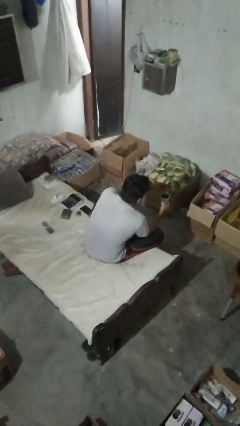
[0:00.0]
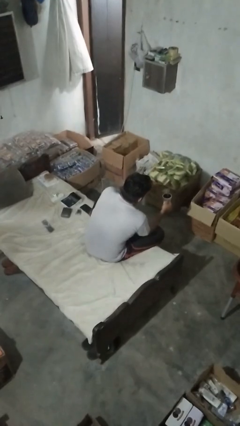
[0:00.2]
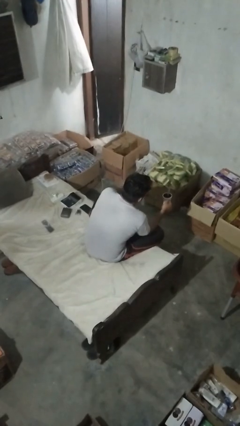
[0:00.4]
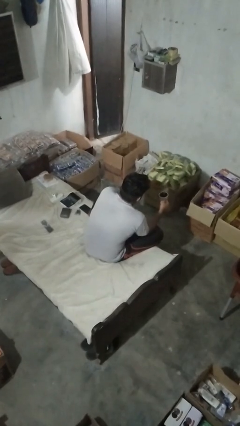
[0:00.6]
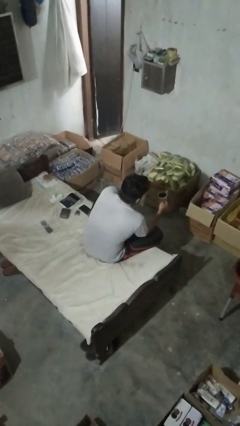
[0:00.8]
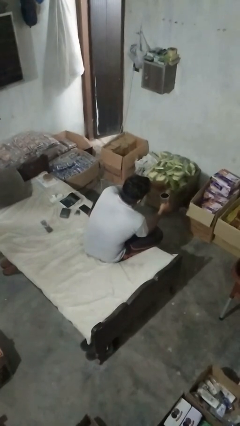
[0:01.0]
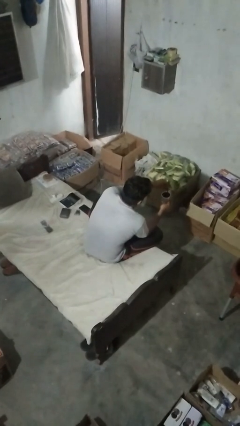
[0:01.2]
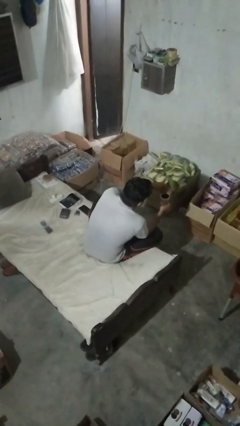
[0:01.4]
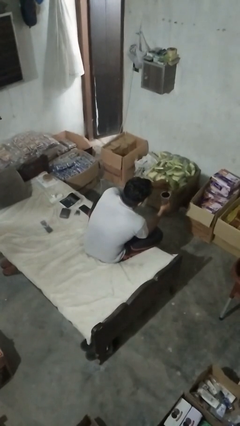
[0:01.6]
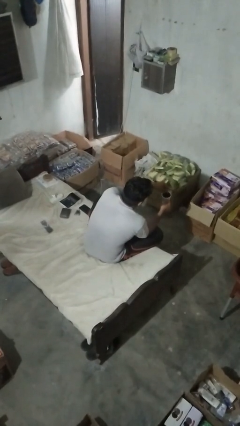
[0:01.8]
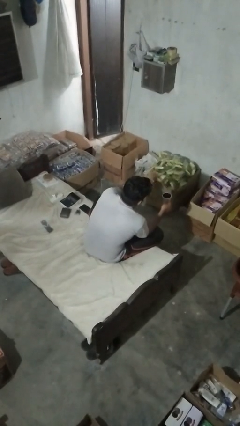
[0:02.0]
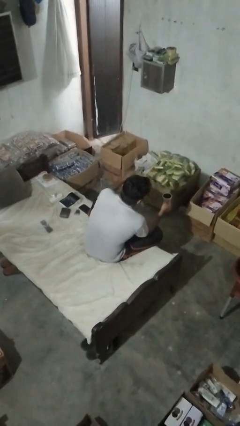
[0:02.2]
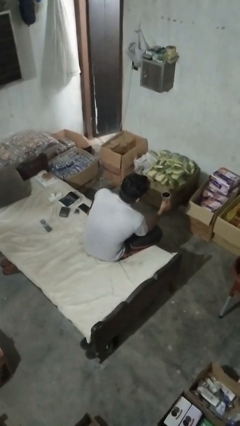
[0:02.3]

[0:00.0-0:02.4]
person stirs mug

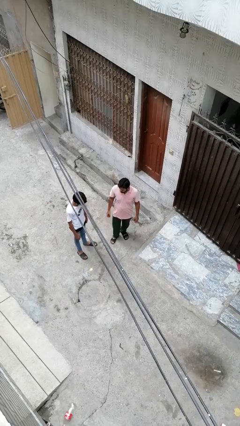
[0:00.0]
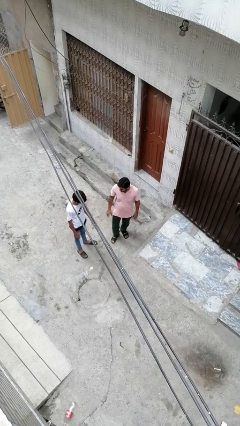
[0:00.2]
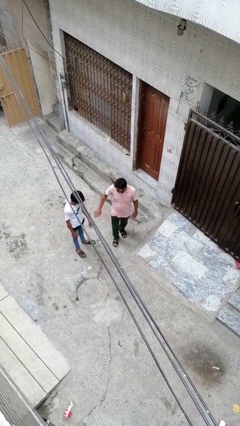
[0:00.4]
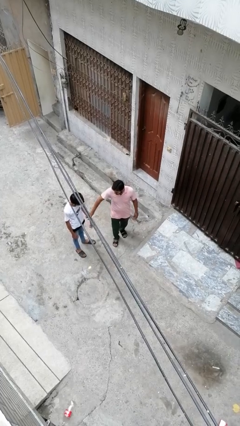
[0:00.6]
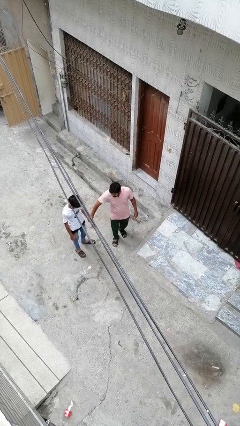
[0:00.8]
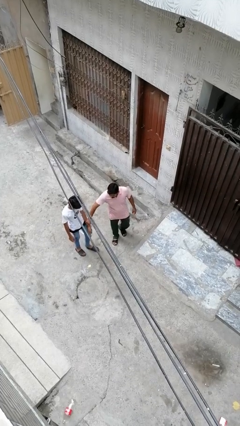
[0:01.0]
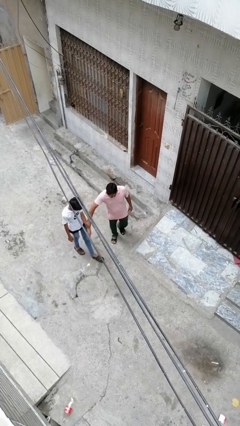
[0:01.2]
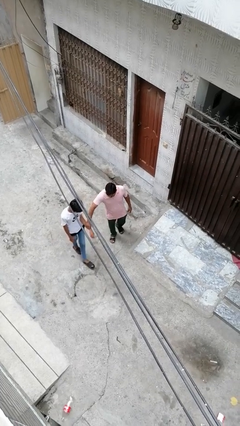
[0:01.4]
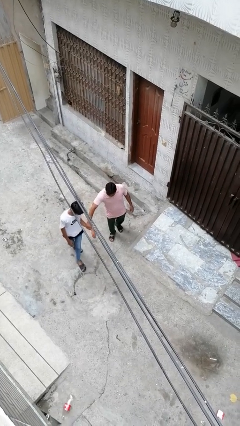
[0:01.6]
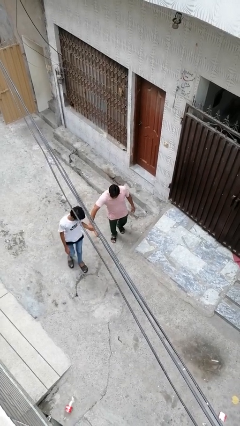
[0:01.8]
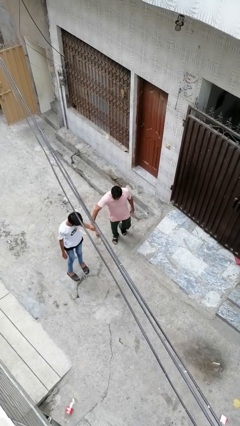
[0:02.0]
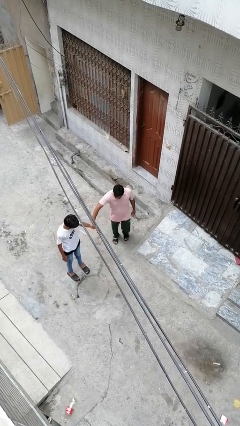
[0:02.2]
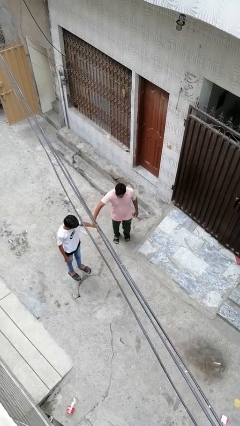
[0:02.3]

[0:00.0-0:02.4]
person grabs person by forearm

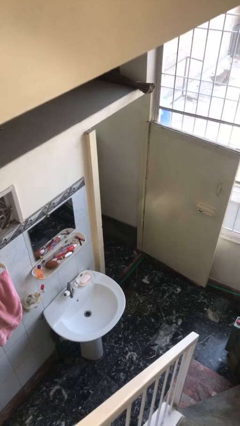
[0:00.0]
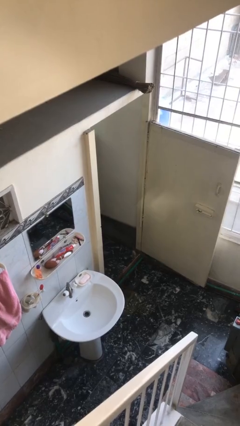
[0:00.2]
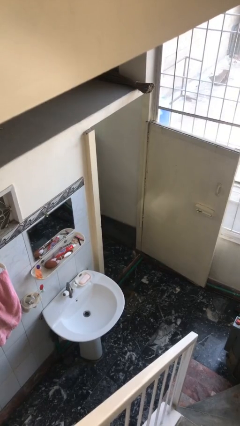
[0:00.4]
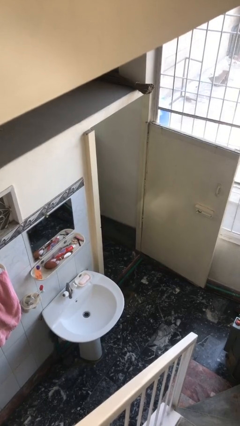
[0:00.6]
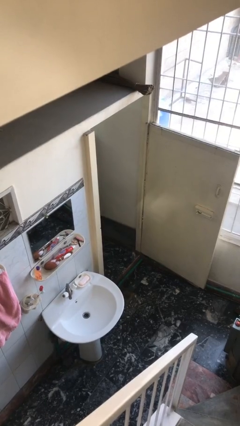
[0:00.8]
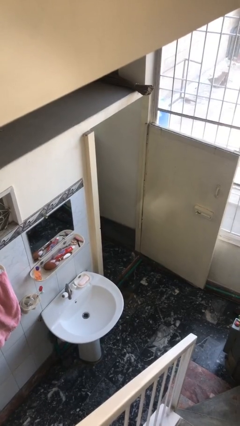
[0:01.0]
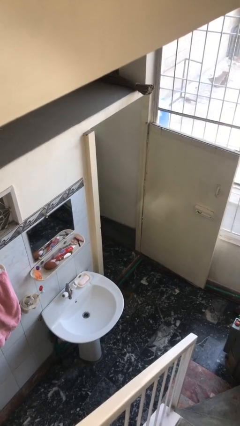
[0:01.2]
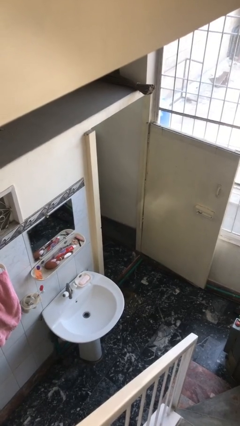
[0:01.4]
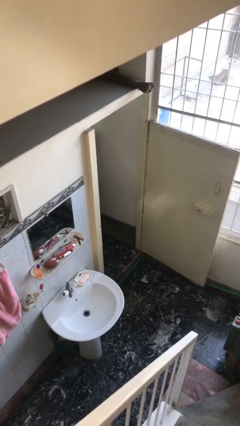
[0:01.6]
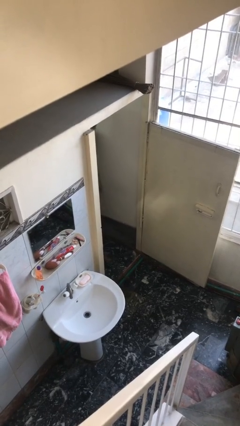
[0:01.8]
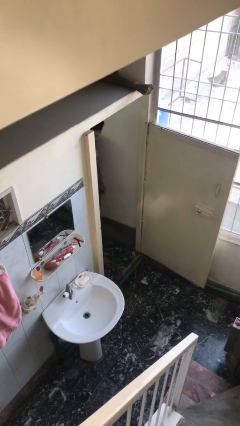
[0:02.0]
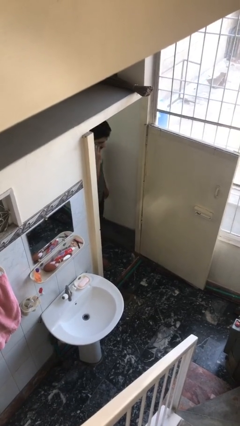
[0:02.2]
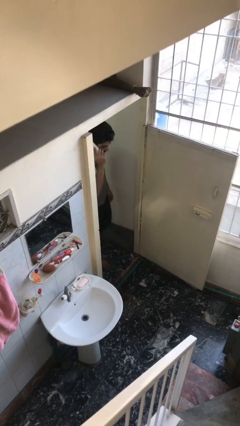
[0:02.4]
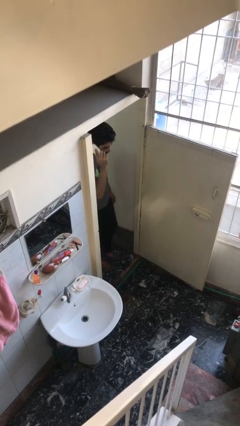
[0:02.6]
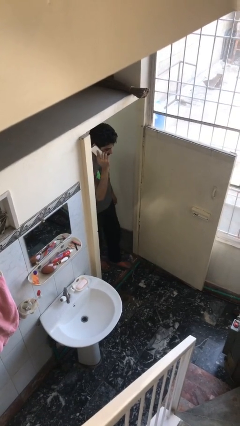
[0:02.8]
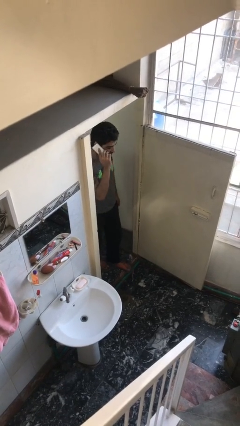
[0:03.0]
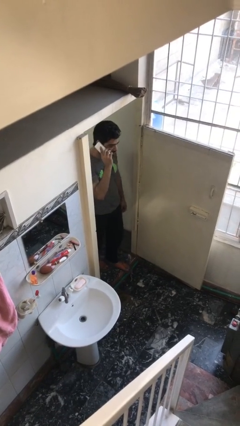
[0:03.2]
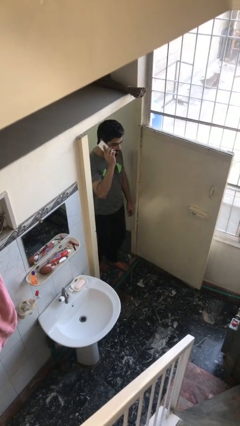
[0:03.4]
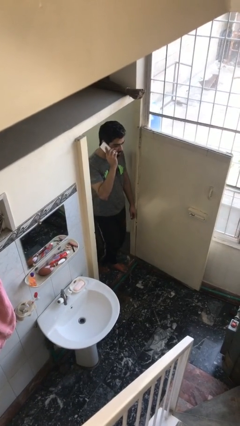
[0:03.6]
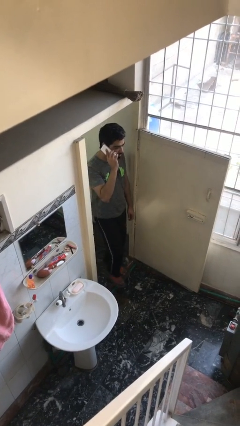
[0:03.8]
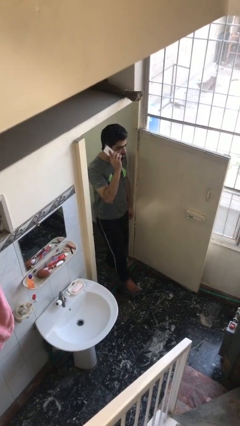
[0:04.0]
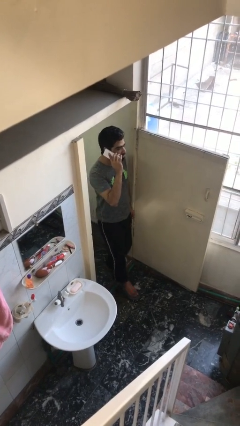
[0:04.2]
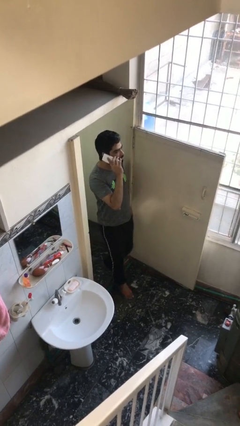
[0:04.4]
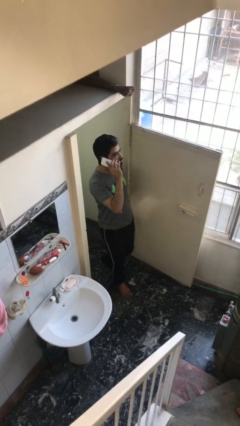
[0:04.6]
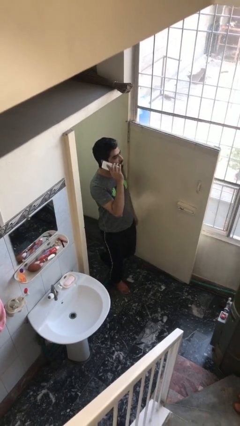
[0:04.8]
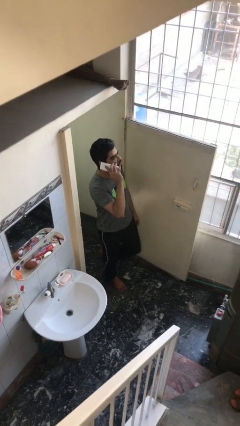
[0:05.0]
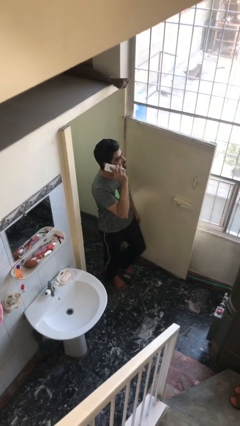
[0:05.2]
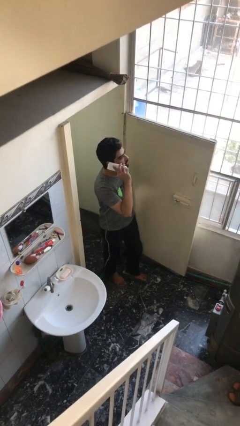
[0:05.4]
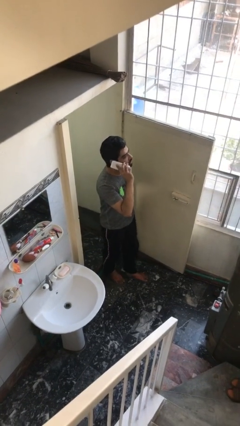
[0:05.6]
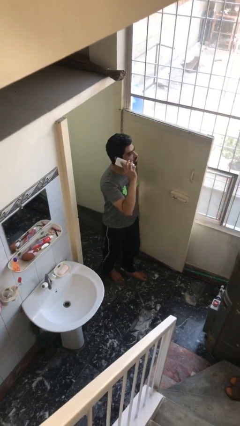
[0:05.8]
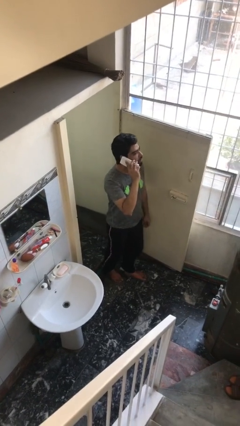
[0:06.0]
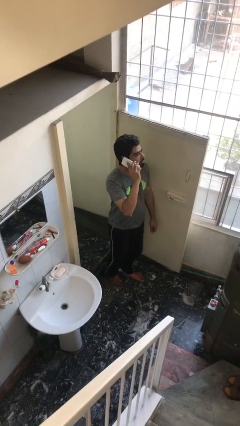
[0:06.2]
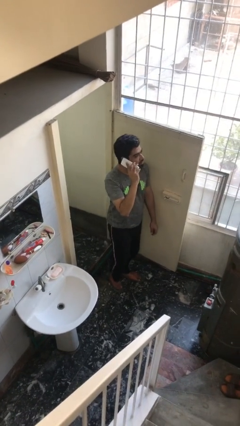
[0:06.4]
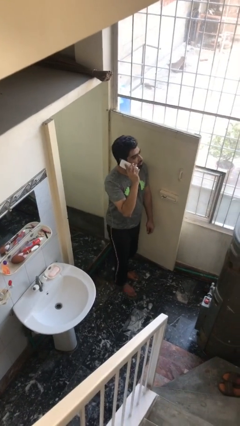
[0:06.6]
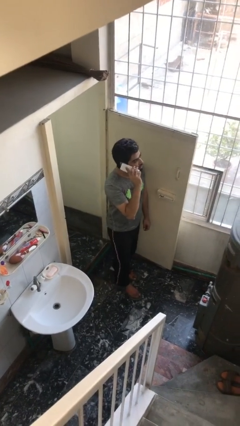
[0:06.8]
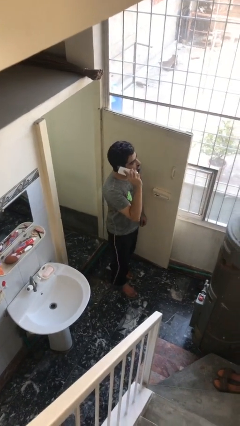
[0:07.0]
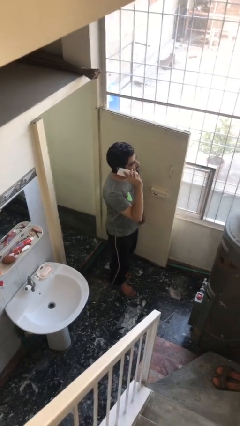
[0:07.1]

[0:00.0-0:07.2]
person enters scene through structure

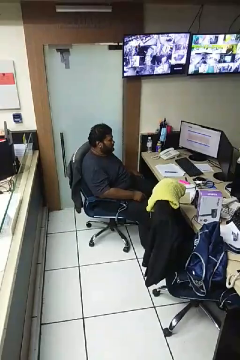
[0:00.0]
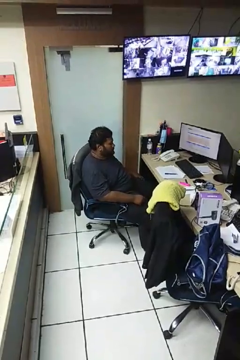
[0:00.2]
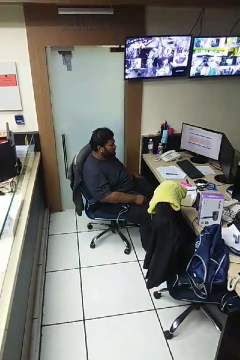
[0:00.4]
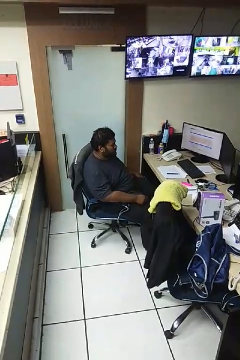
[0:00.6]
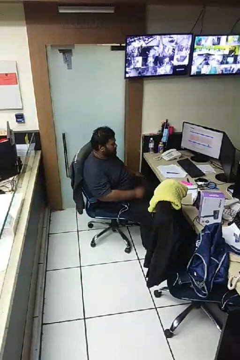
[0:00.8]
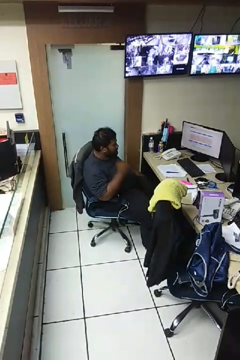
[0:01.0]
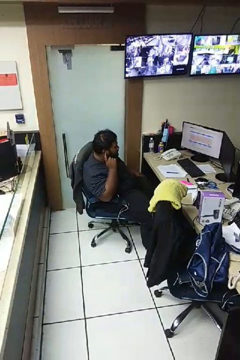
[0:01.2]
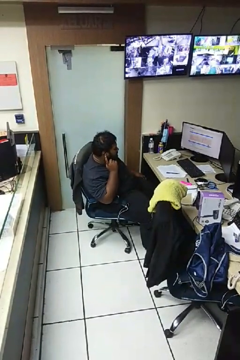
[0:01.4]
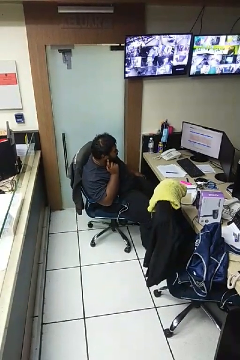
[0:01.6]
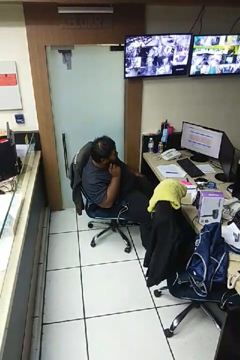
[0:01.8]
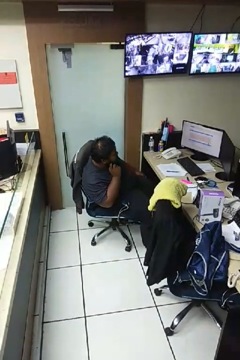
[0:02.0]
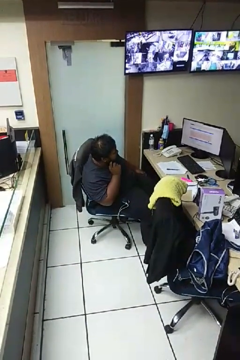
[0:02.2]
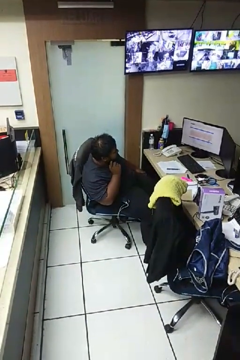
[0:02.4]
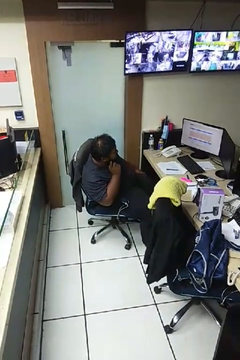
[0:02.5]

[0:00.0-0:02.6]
person gestures listen closely

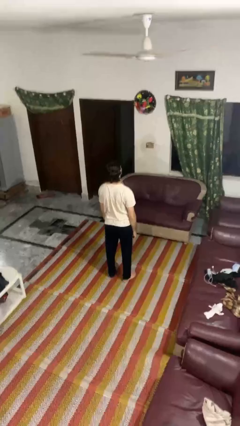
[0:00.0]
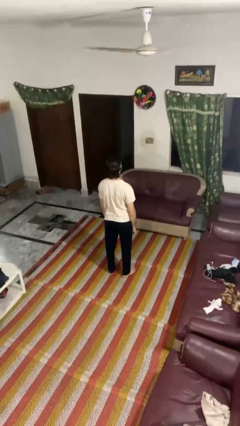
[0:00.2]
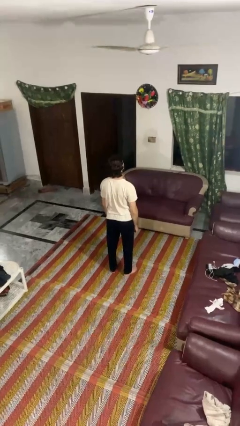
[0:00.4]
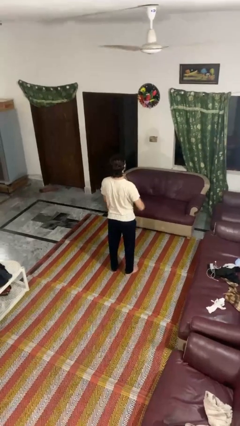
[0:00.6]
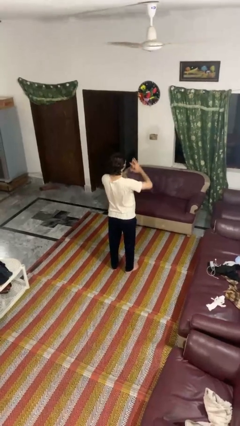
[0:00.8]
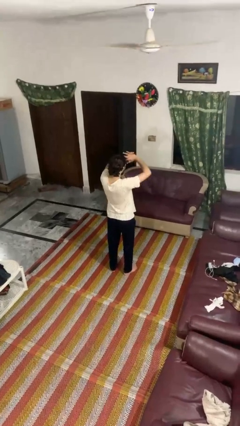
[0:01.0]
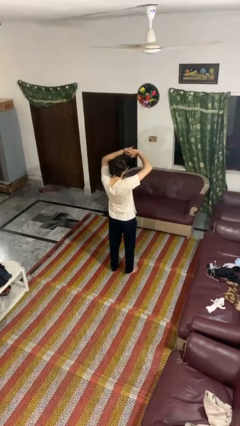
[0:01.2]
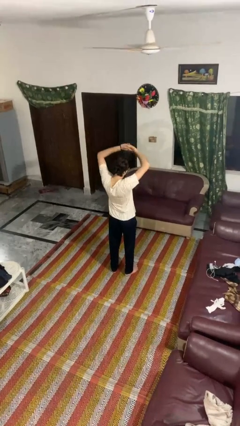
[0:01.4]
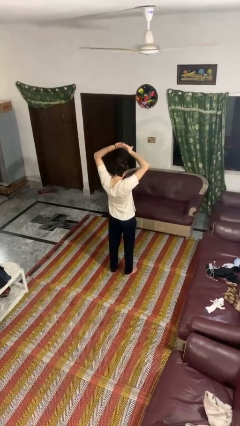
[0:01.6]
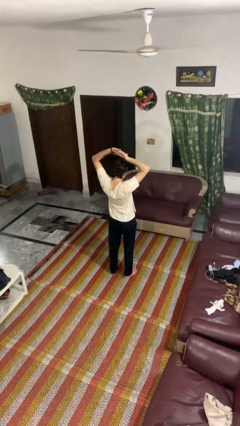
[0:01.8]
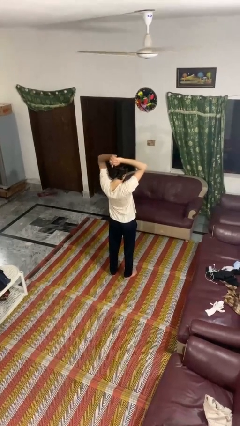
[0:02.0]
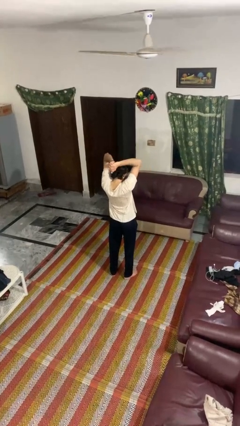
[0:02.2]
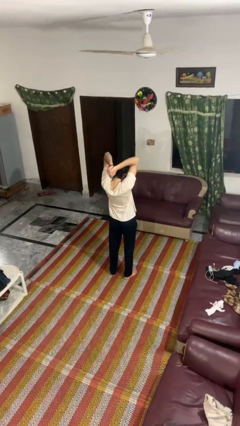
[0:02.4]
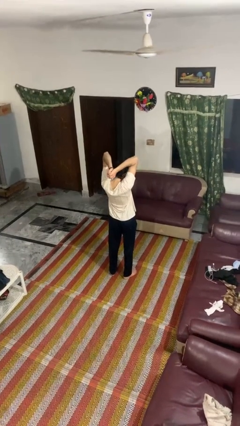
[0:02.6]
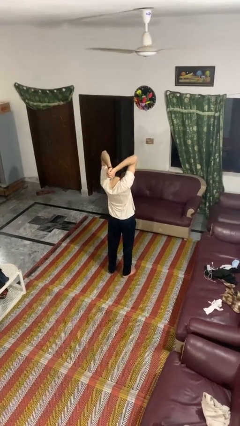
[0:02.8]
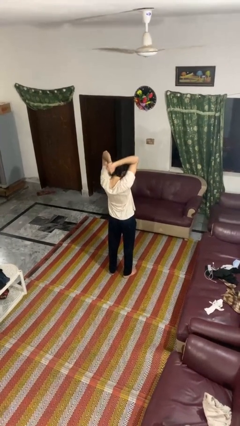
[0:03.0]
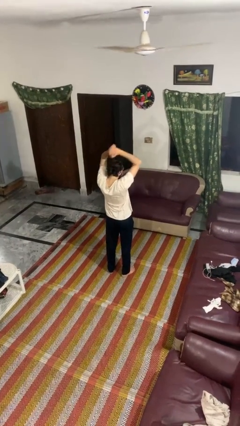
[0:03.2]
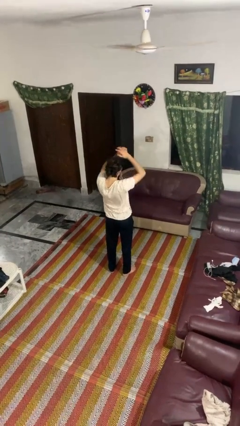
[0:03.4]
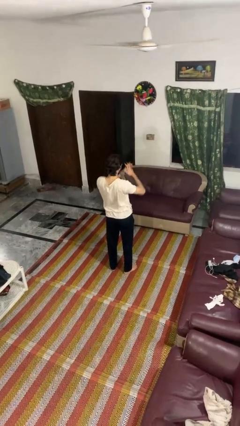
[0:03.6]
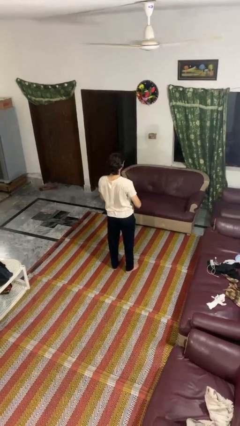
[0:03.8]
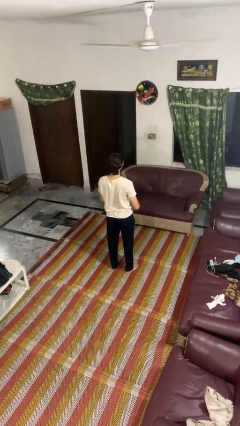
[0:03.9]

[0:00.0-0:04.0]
person stretches arms over head
